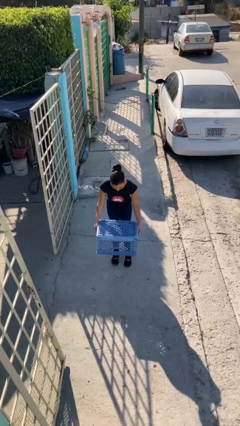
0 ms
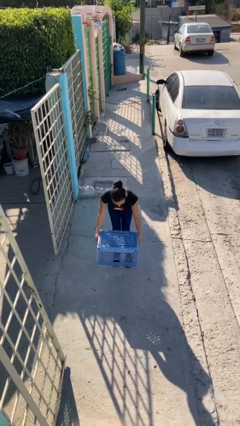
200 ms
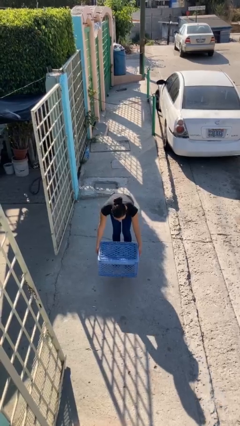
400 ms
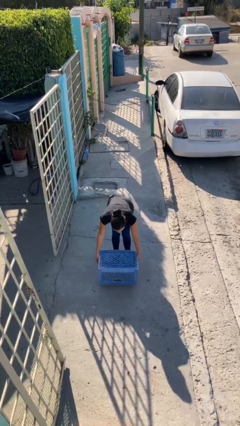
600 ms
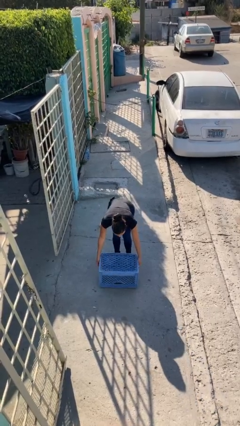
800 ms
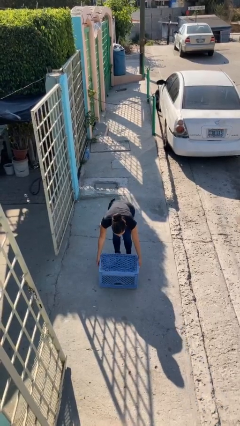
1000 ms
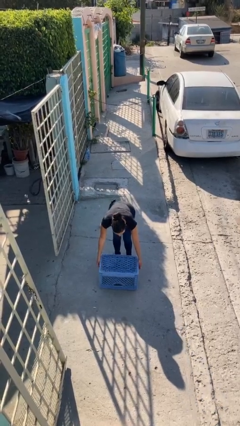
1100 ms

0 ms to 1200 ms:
person puts down object on floor

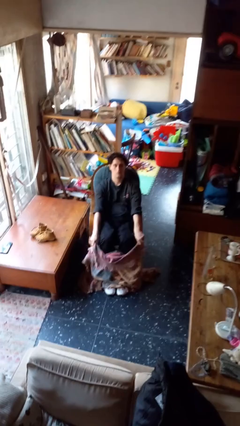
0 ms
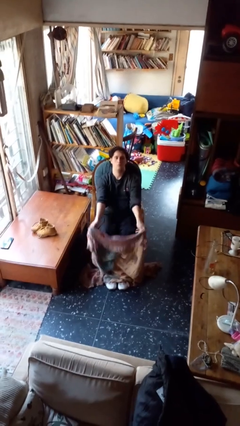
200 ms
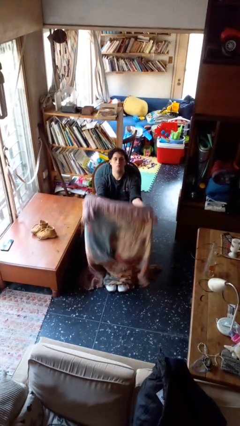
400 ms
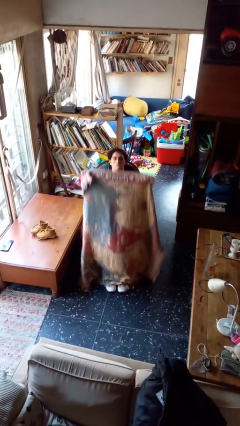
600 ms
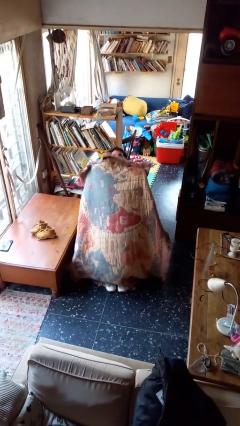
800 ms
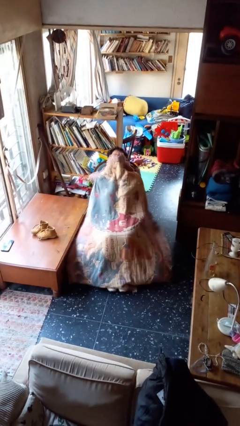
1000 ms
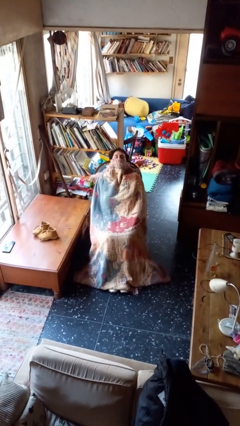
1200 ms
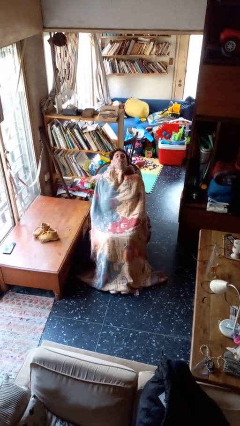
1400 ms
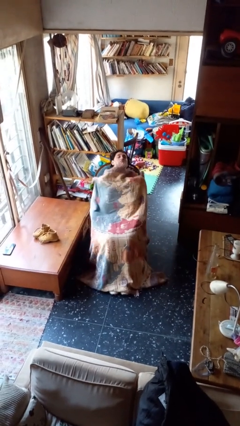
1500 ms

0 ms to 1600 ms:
person covers with blanket

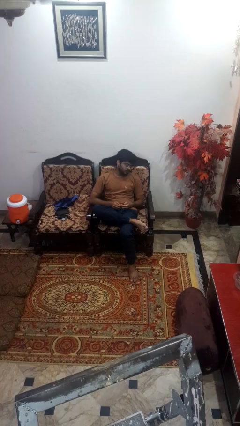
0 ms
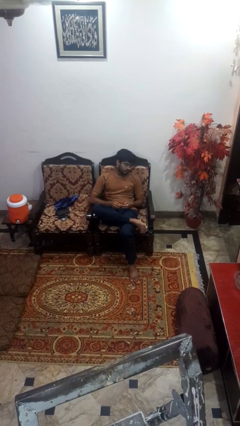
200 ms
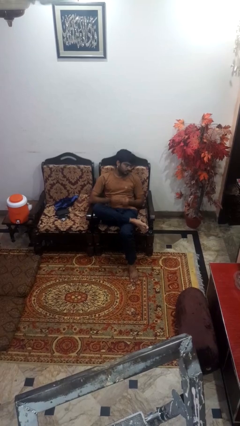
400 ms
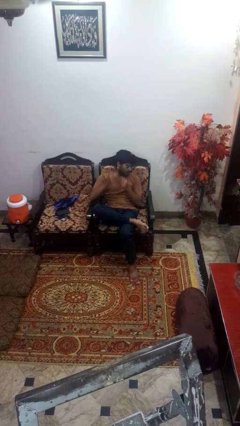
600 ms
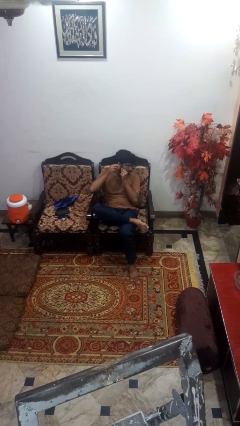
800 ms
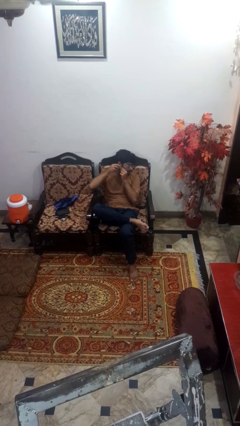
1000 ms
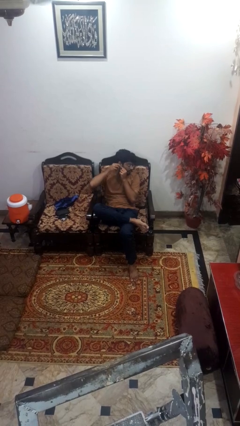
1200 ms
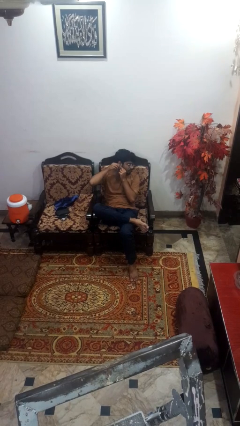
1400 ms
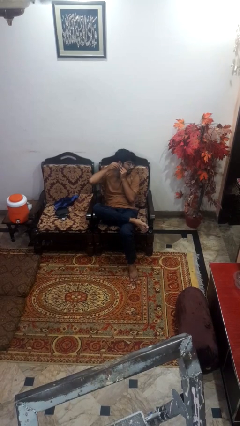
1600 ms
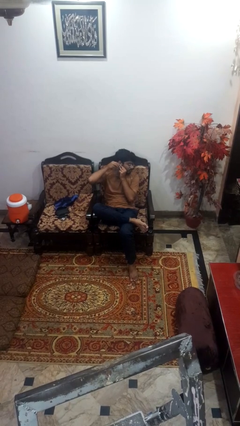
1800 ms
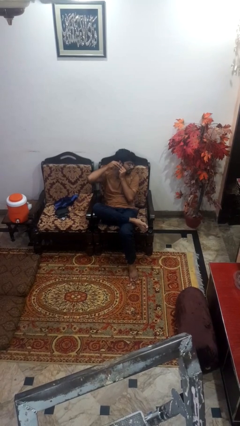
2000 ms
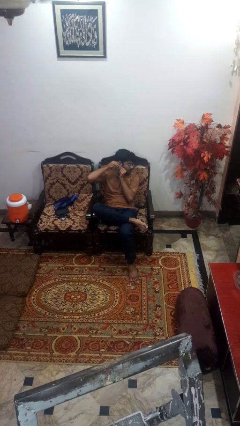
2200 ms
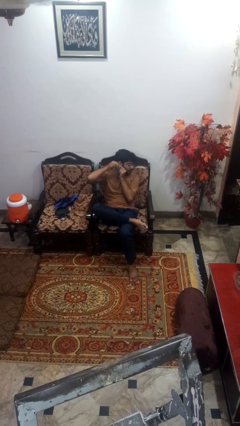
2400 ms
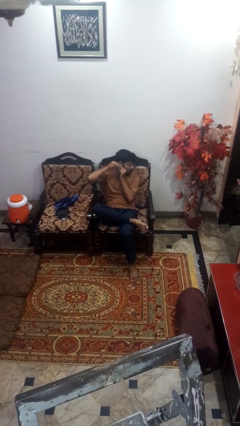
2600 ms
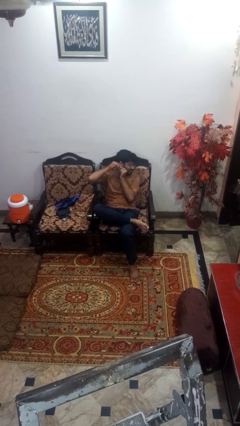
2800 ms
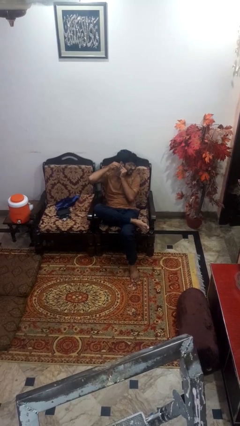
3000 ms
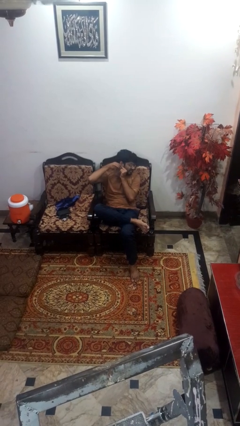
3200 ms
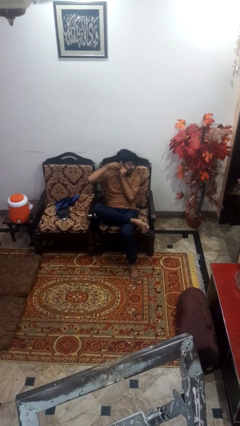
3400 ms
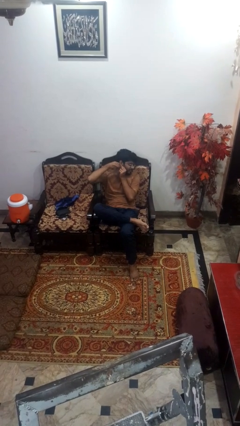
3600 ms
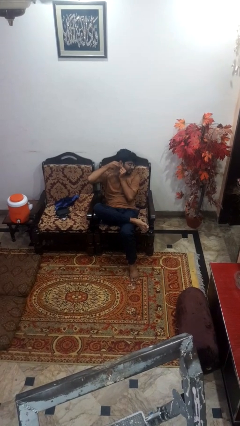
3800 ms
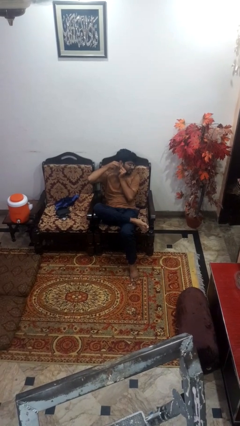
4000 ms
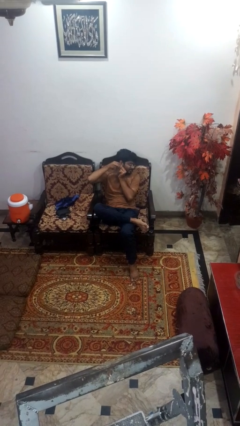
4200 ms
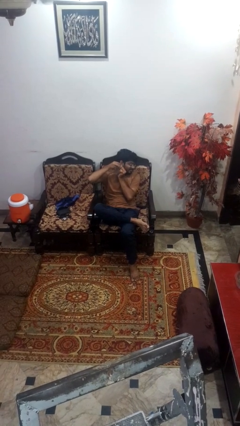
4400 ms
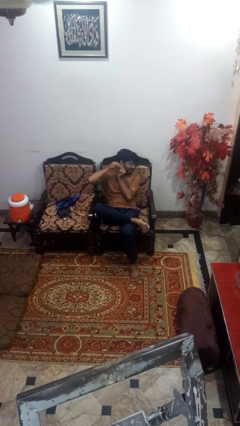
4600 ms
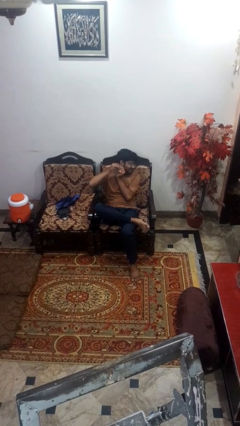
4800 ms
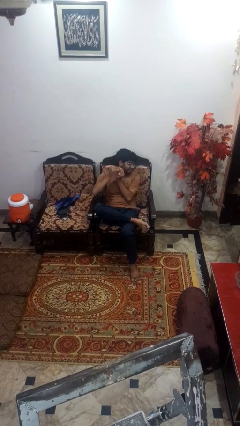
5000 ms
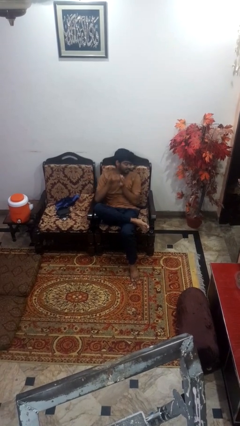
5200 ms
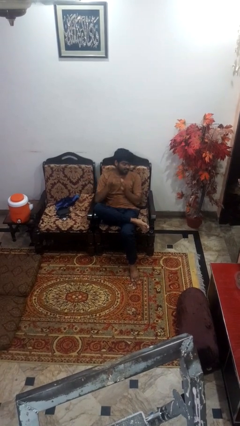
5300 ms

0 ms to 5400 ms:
person takes off earrings

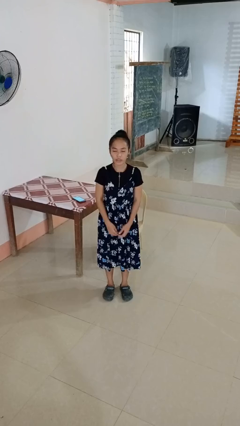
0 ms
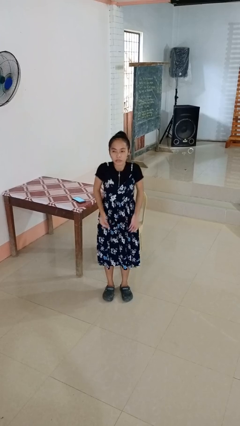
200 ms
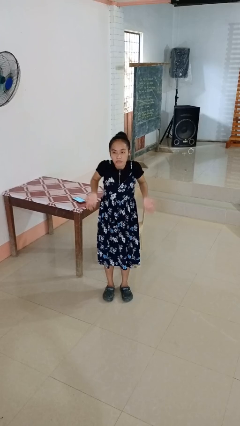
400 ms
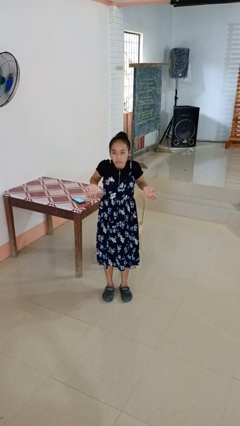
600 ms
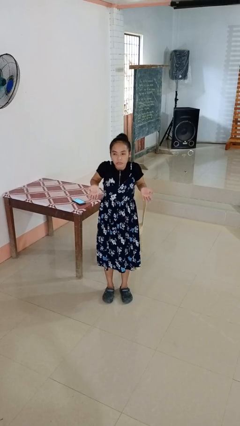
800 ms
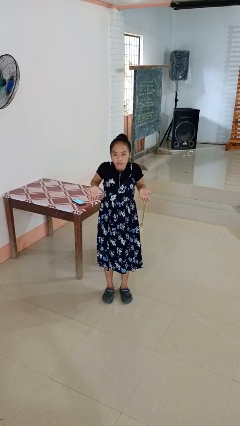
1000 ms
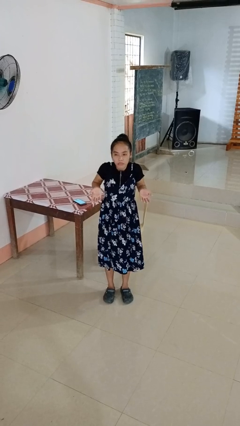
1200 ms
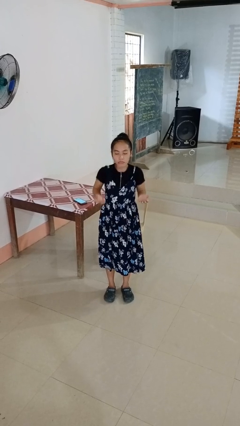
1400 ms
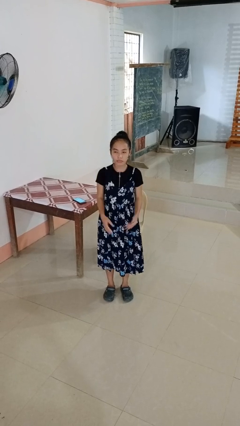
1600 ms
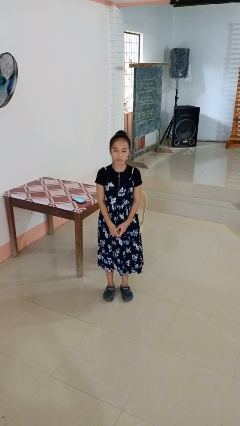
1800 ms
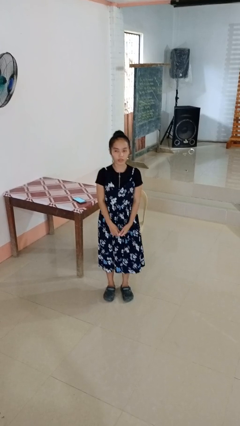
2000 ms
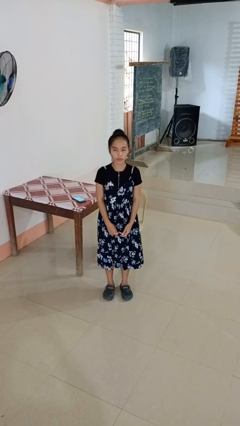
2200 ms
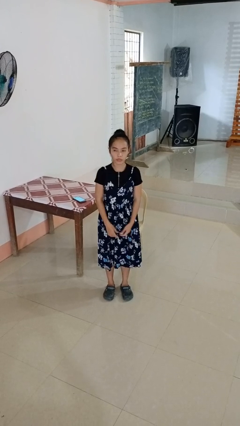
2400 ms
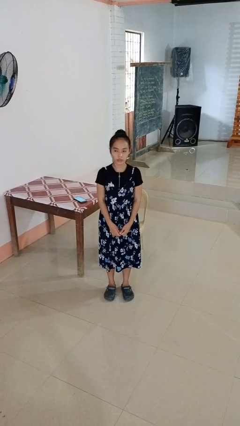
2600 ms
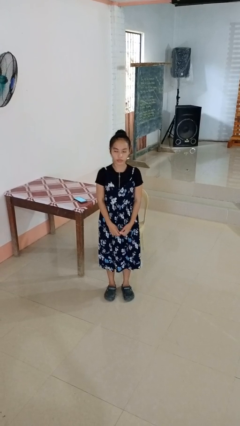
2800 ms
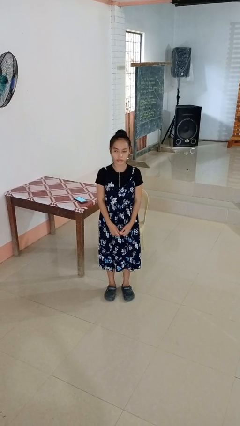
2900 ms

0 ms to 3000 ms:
person shrugs

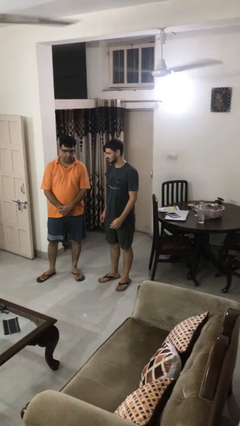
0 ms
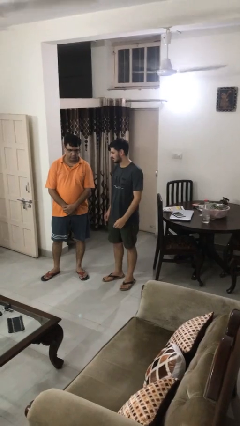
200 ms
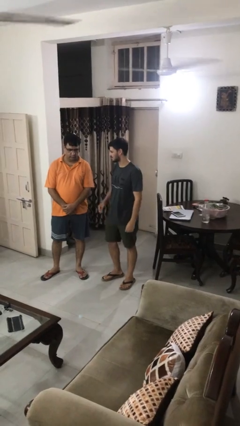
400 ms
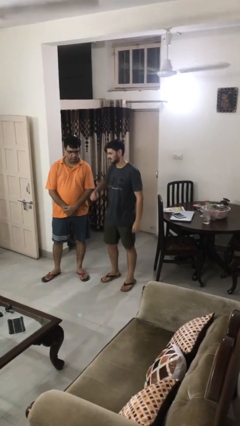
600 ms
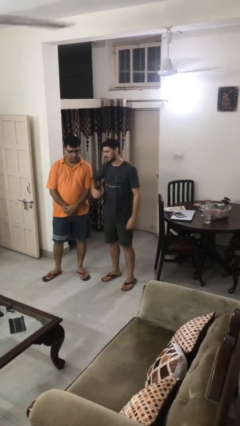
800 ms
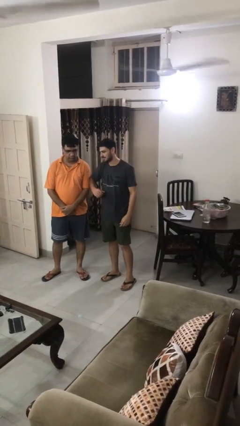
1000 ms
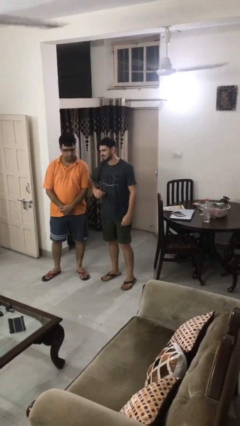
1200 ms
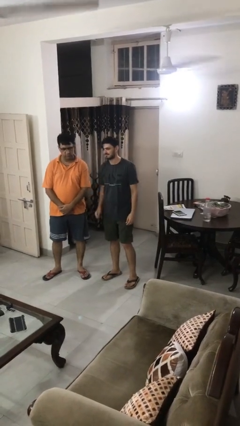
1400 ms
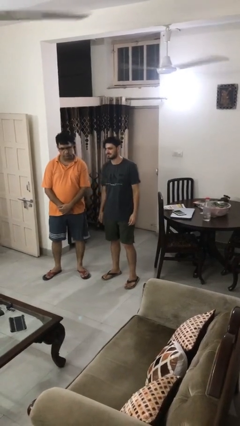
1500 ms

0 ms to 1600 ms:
person nudges person with elbow

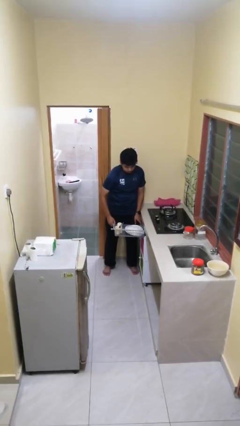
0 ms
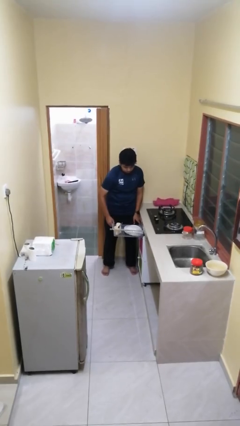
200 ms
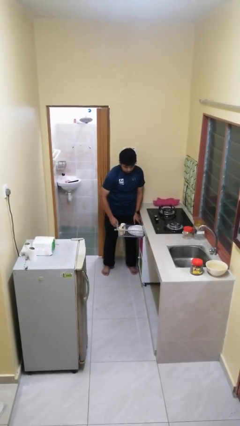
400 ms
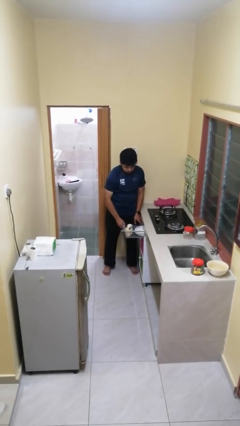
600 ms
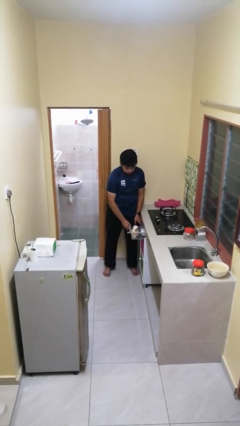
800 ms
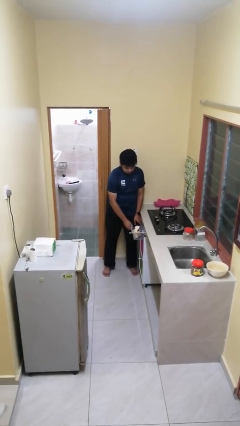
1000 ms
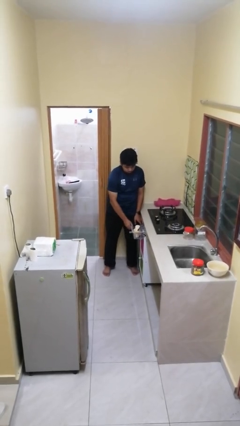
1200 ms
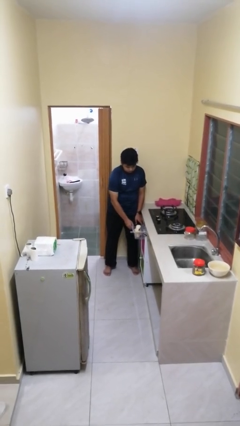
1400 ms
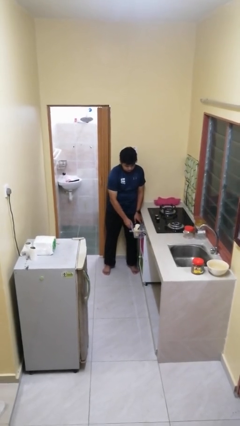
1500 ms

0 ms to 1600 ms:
person closes kitchen drawer

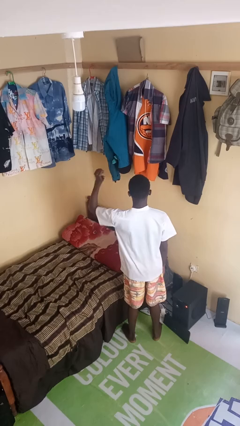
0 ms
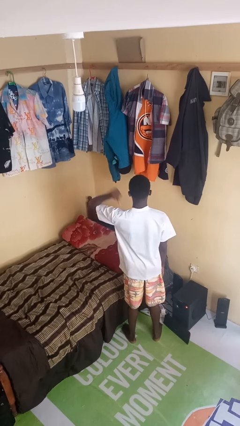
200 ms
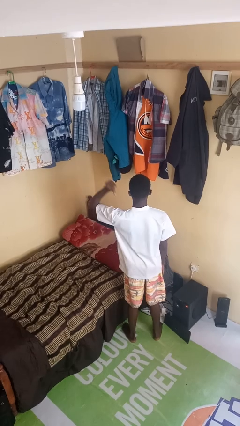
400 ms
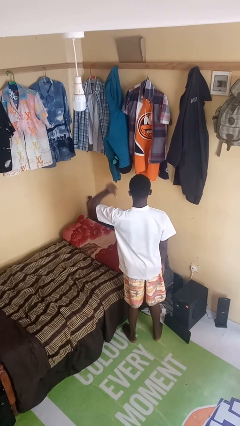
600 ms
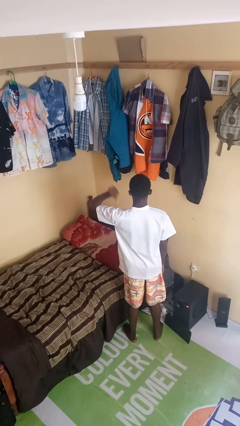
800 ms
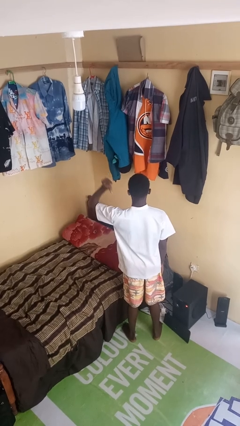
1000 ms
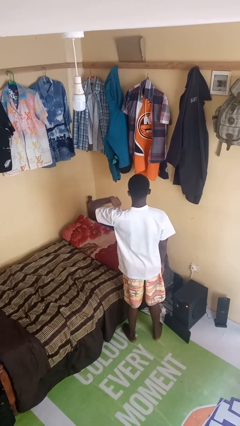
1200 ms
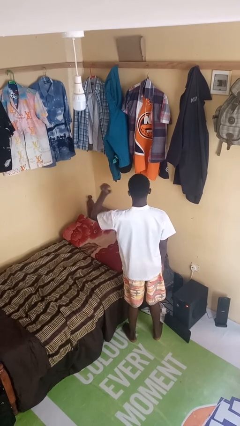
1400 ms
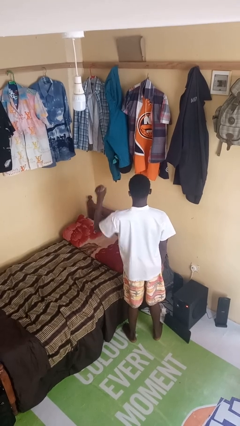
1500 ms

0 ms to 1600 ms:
person gestures behind me

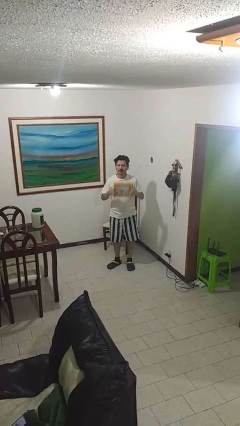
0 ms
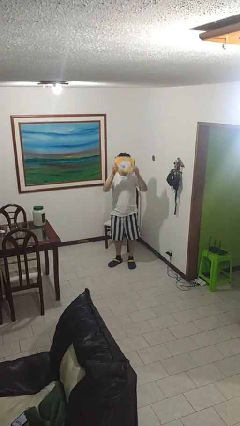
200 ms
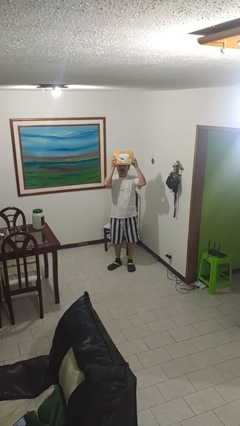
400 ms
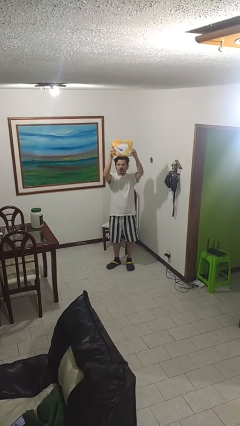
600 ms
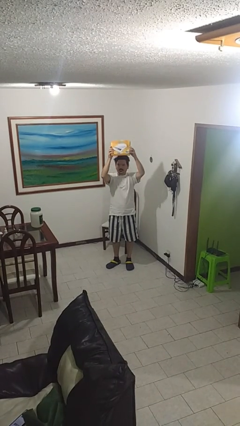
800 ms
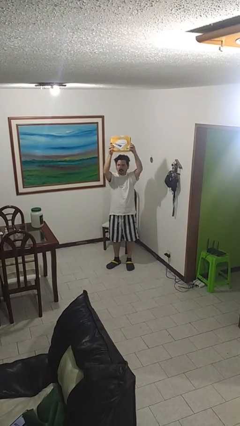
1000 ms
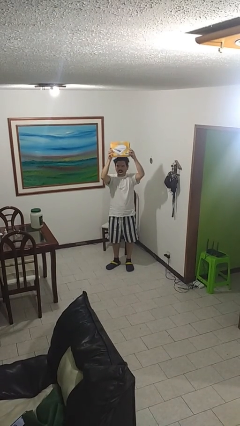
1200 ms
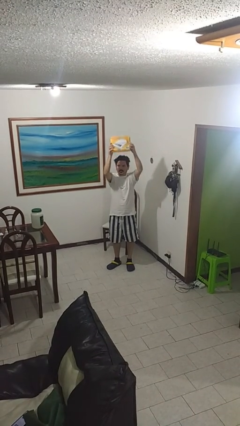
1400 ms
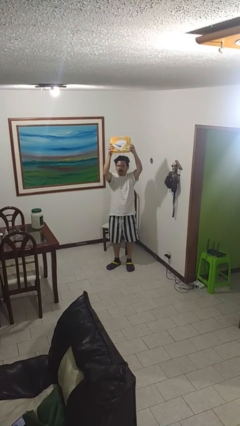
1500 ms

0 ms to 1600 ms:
person holds object above head
